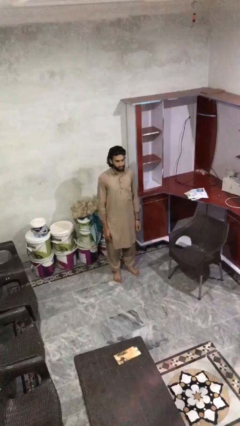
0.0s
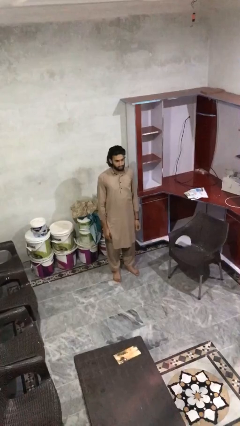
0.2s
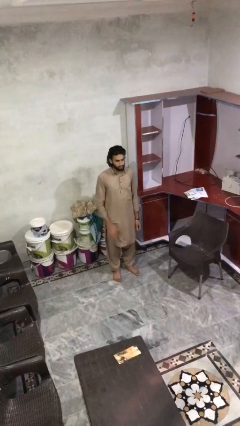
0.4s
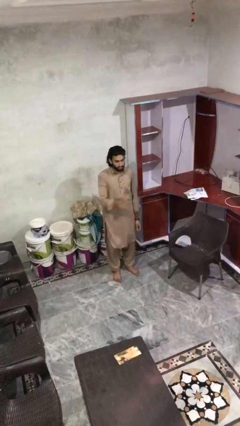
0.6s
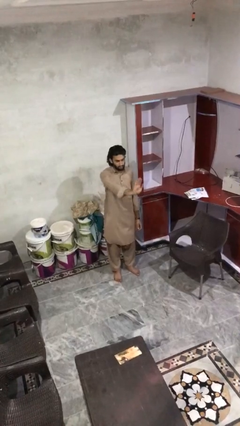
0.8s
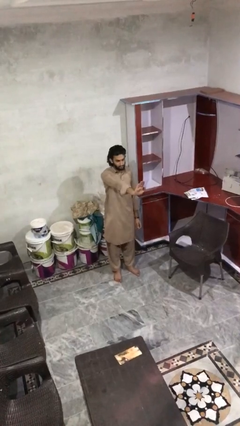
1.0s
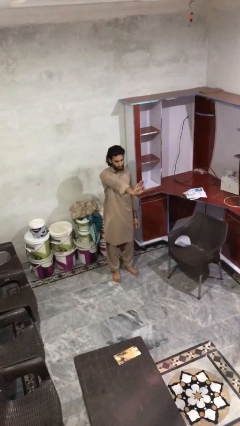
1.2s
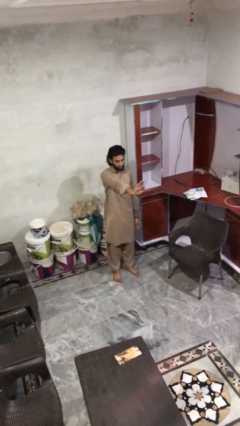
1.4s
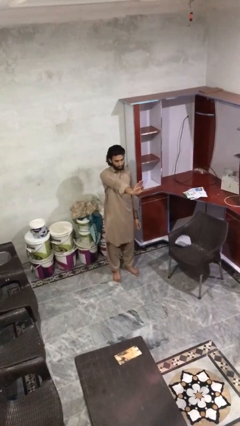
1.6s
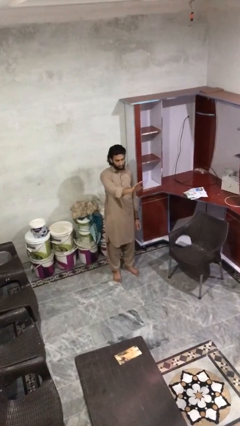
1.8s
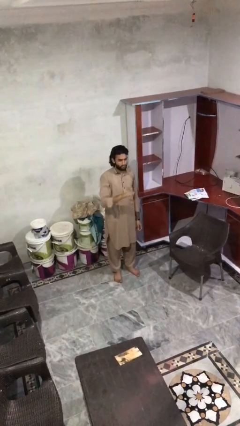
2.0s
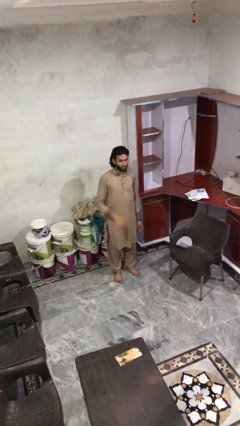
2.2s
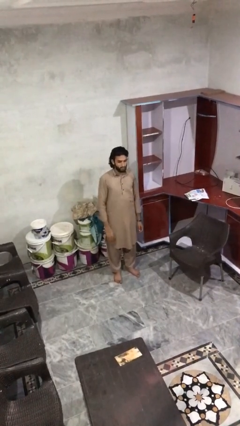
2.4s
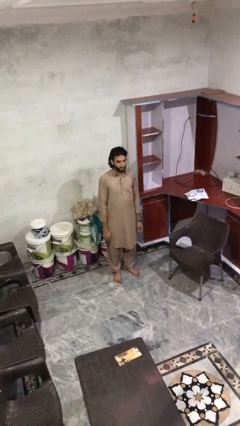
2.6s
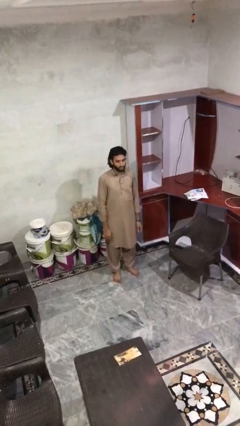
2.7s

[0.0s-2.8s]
person gestures stop

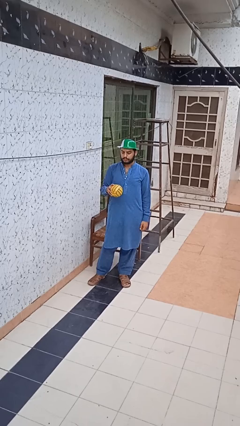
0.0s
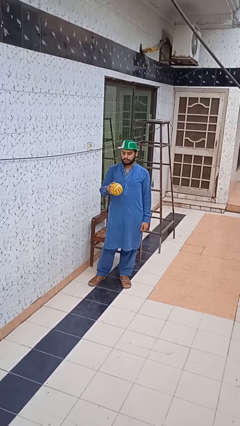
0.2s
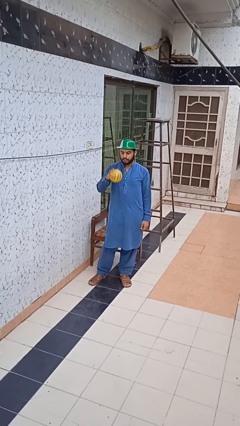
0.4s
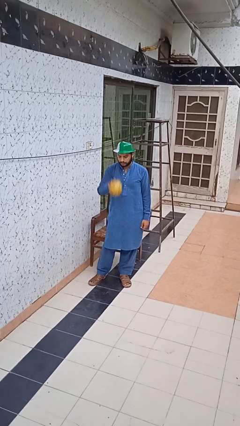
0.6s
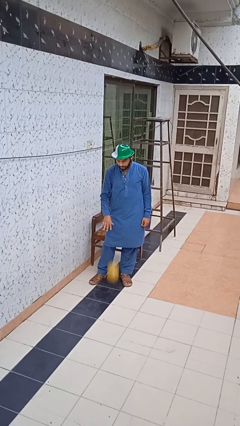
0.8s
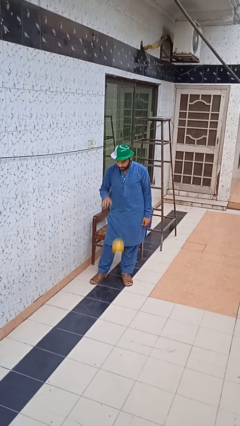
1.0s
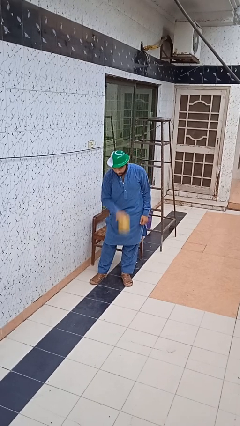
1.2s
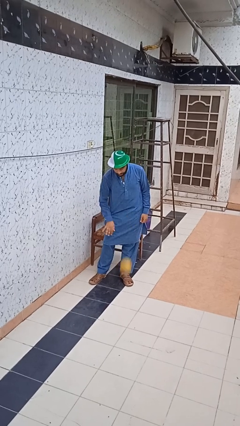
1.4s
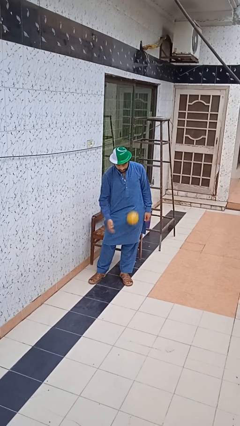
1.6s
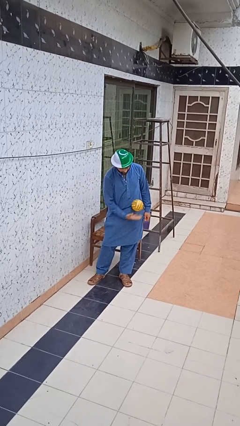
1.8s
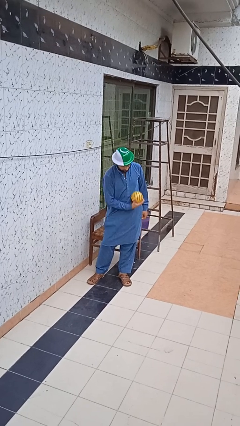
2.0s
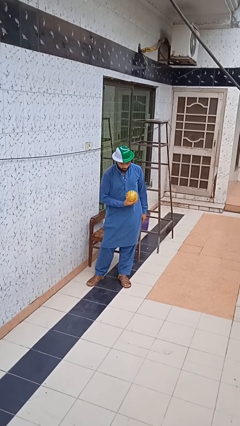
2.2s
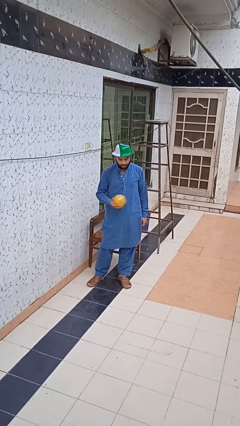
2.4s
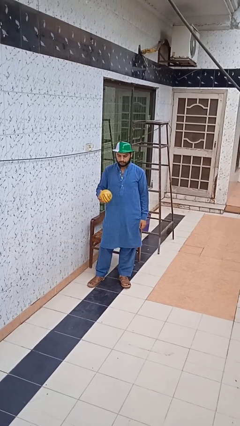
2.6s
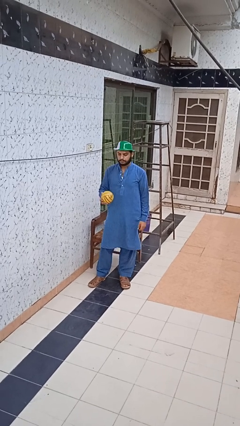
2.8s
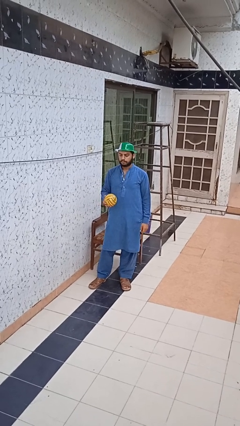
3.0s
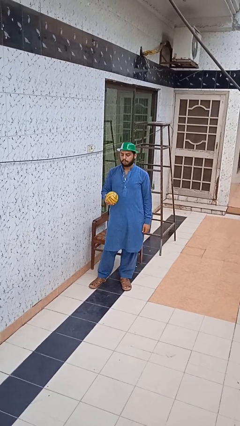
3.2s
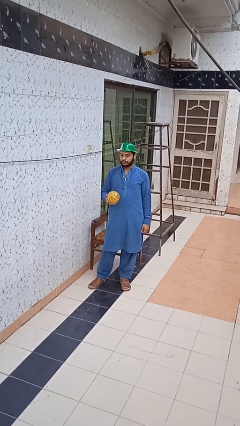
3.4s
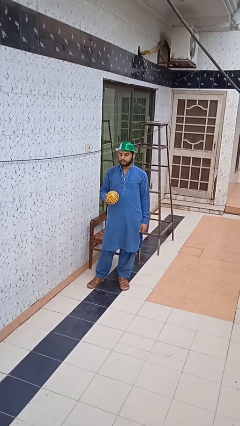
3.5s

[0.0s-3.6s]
person bounces ball on floor

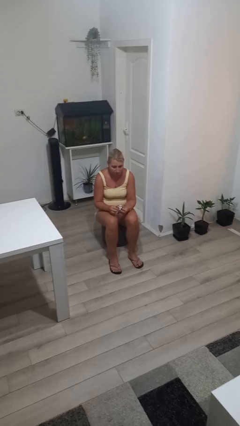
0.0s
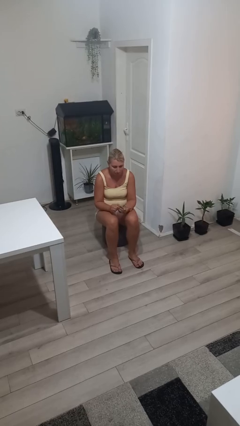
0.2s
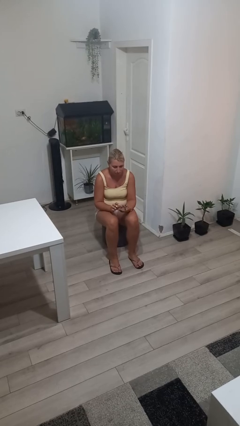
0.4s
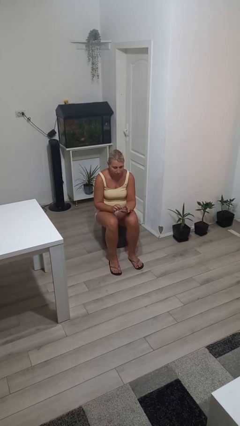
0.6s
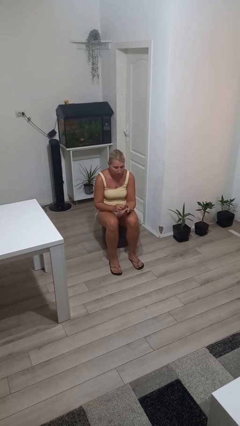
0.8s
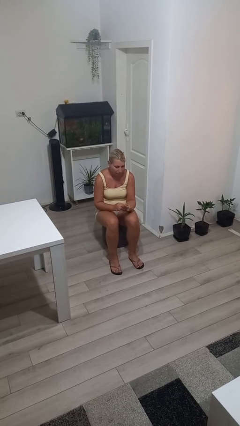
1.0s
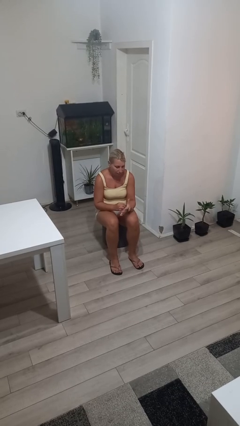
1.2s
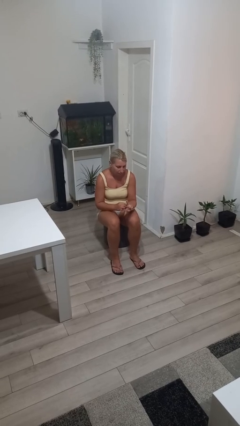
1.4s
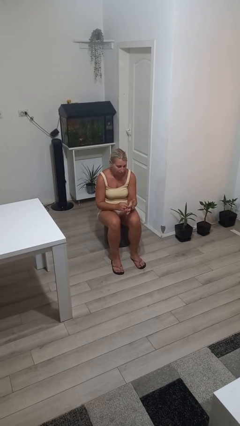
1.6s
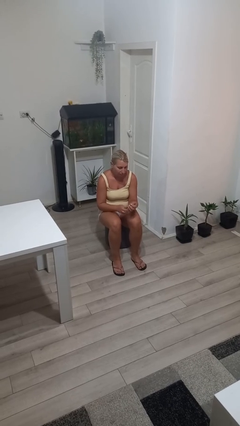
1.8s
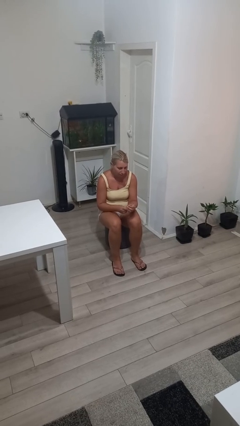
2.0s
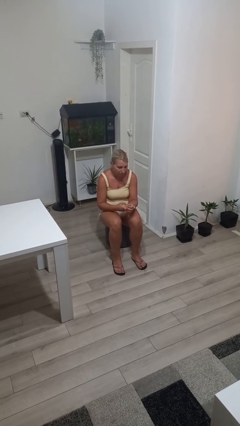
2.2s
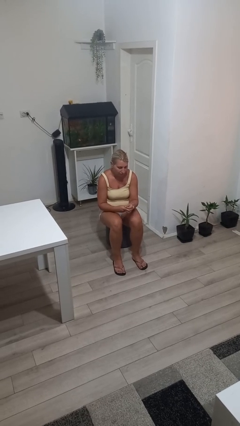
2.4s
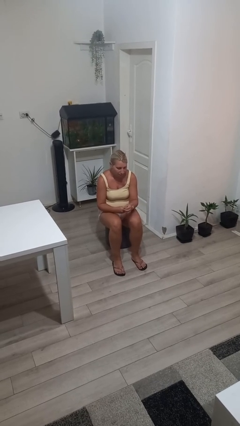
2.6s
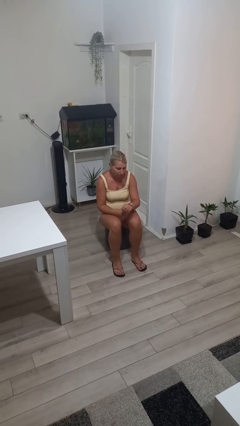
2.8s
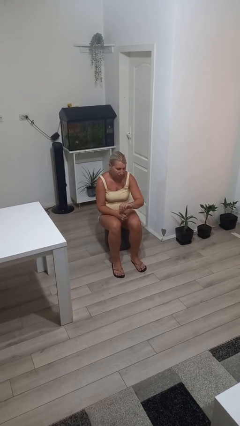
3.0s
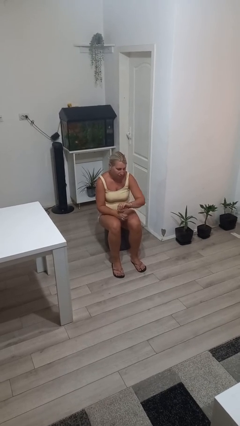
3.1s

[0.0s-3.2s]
person puts on wristwatch

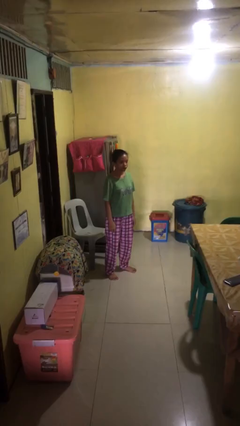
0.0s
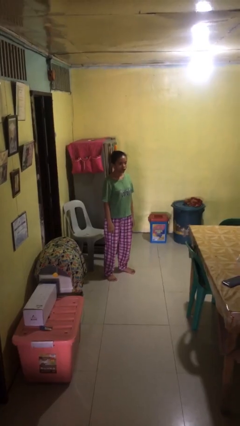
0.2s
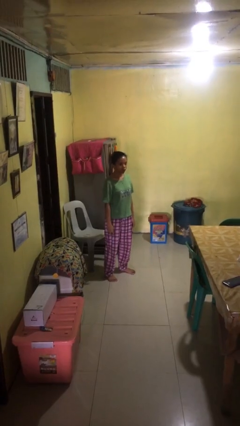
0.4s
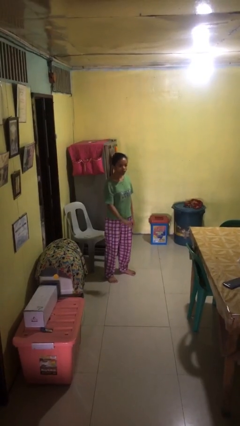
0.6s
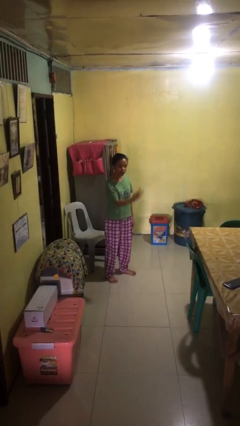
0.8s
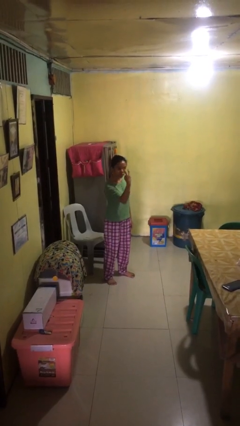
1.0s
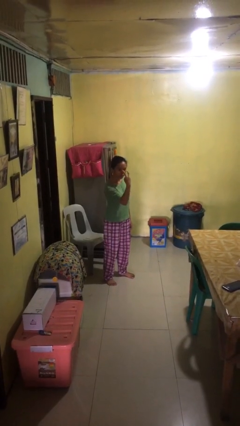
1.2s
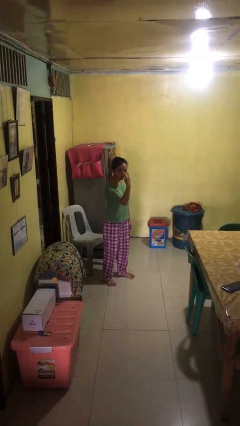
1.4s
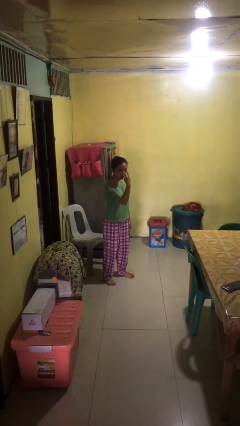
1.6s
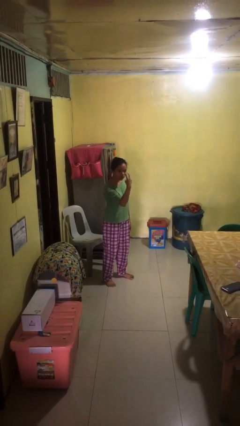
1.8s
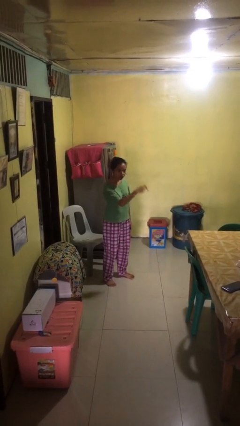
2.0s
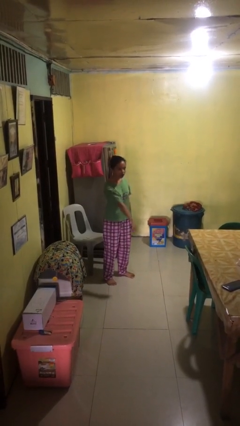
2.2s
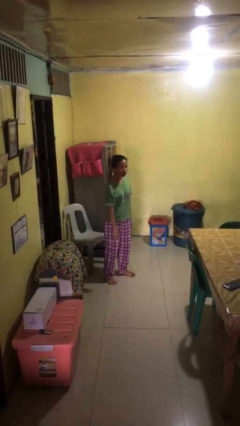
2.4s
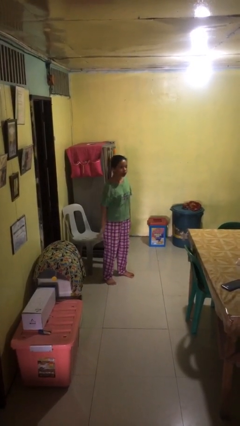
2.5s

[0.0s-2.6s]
person gestures watch closely

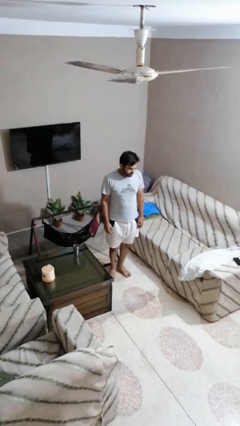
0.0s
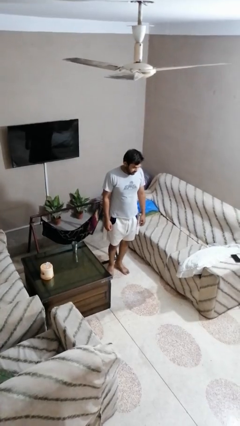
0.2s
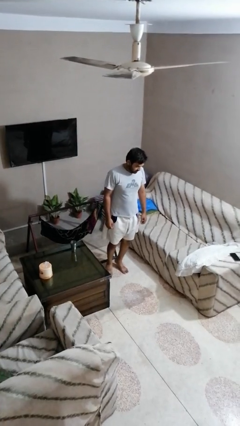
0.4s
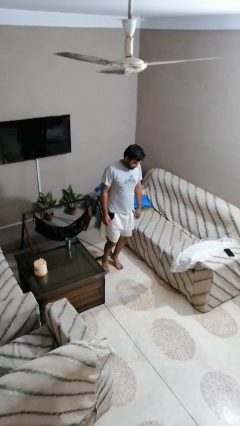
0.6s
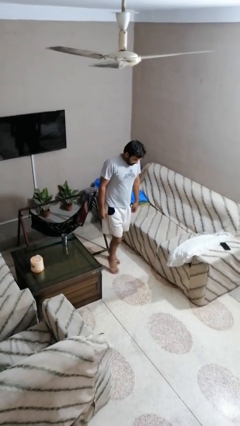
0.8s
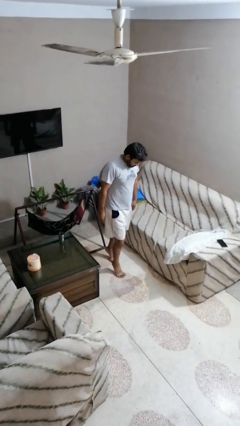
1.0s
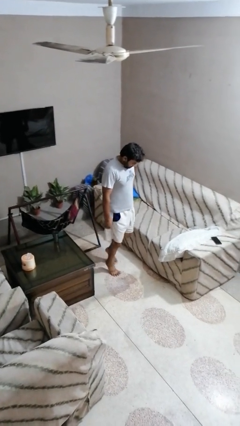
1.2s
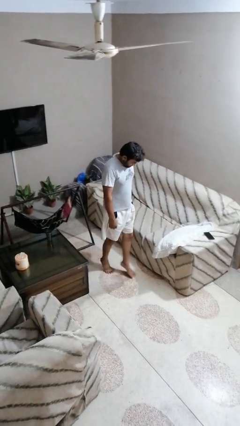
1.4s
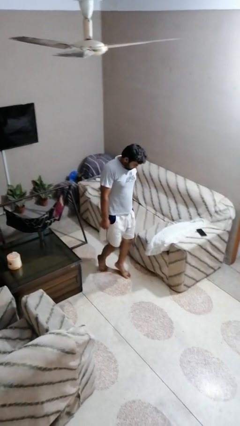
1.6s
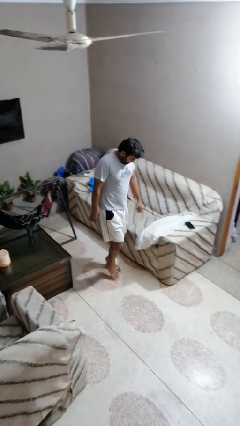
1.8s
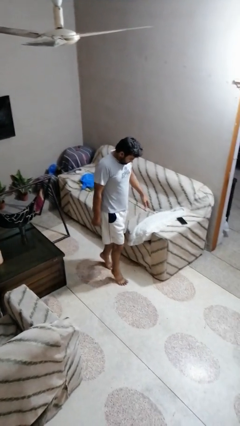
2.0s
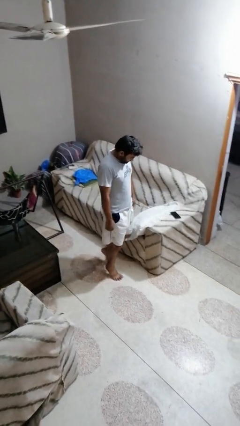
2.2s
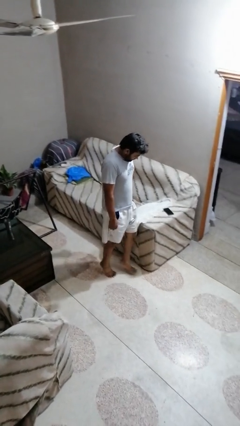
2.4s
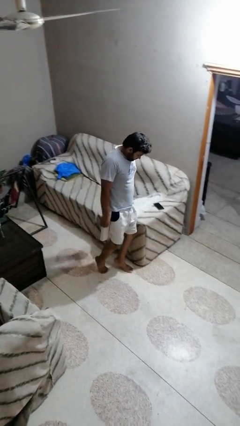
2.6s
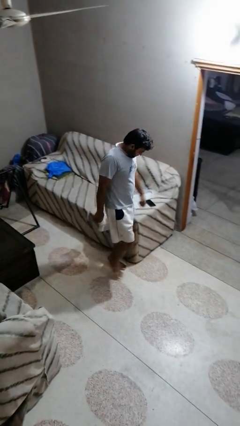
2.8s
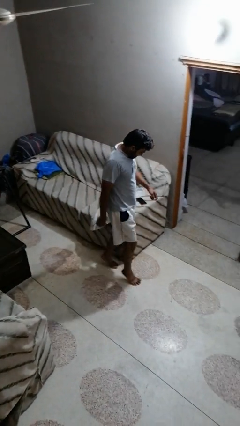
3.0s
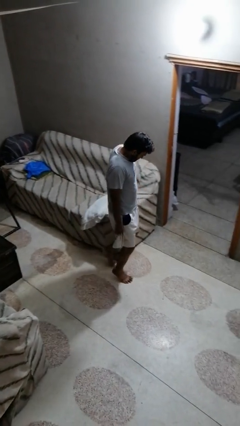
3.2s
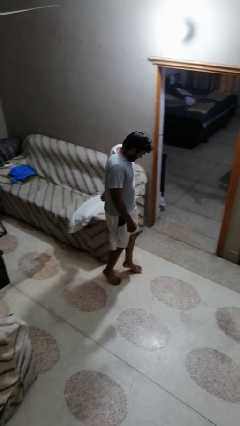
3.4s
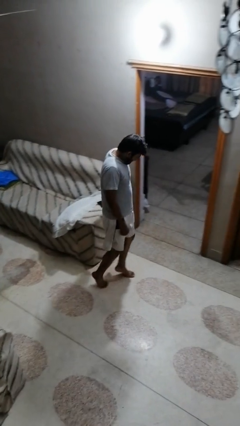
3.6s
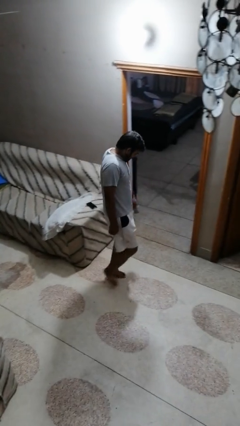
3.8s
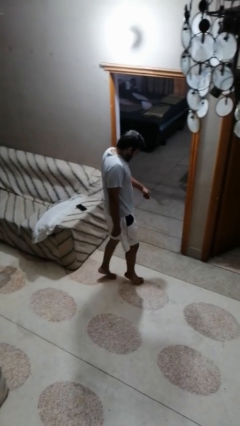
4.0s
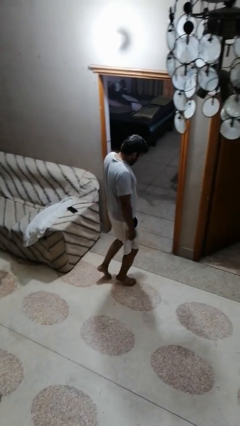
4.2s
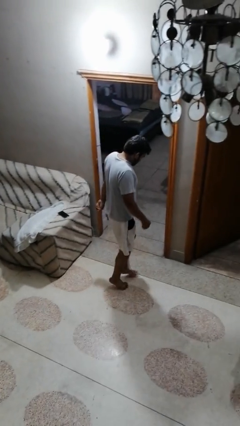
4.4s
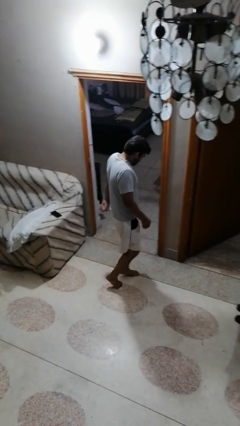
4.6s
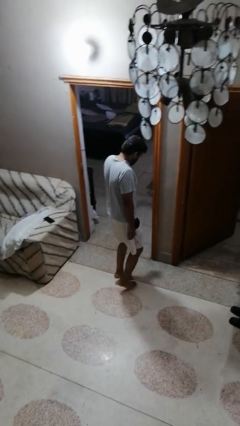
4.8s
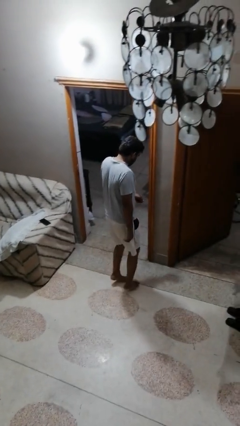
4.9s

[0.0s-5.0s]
person walks tiptoe

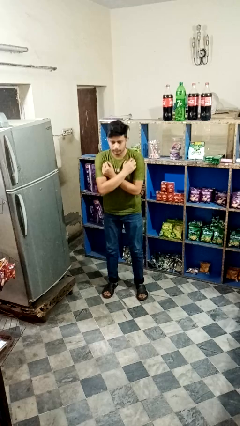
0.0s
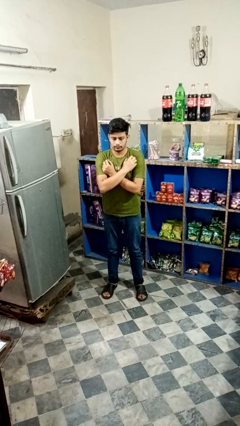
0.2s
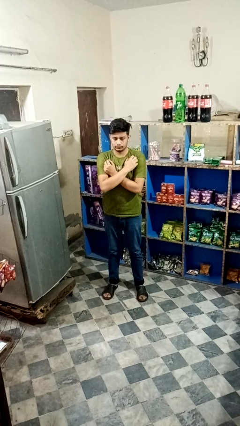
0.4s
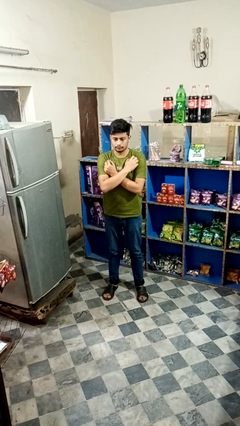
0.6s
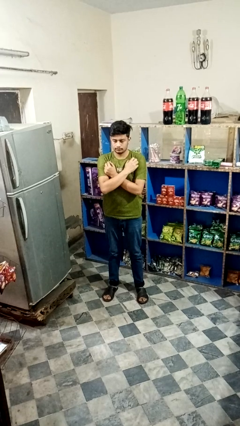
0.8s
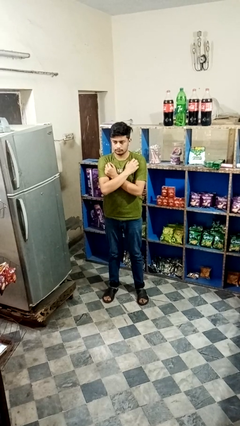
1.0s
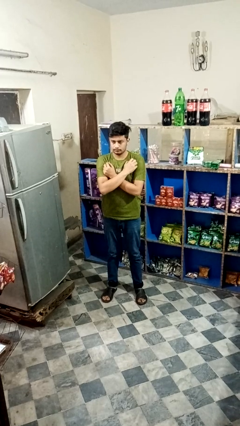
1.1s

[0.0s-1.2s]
person stands up
